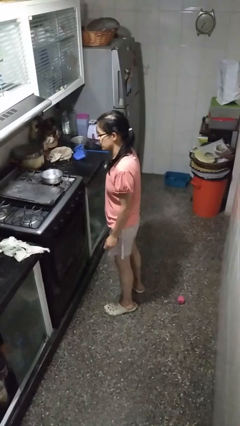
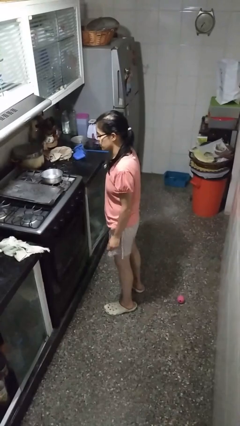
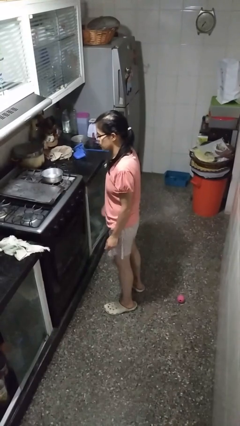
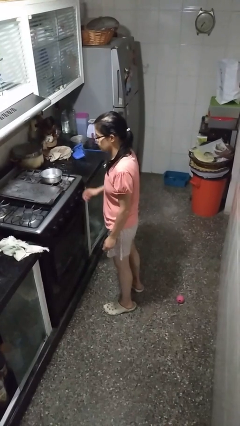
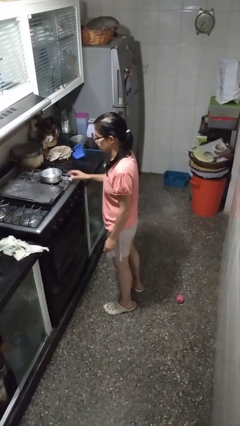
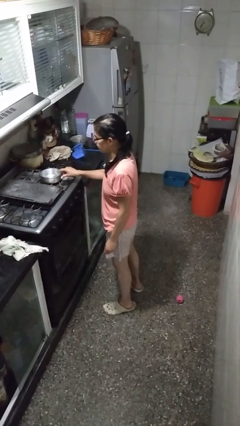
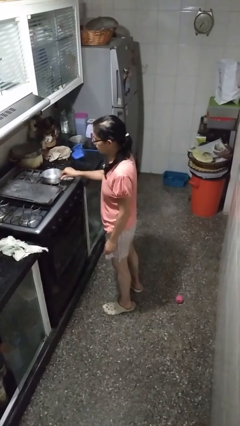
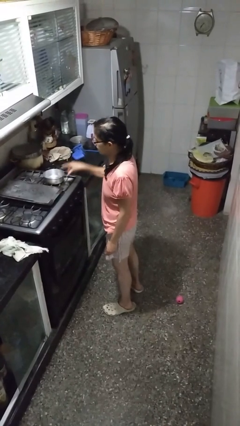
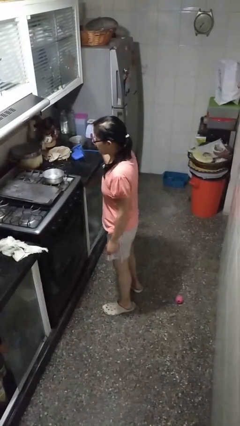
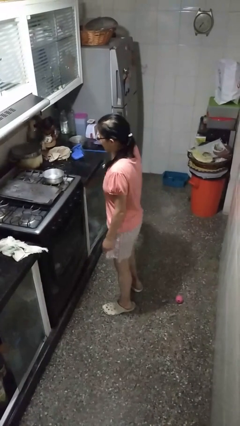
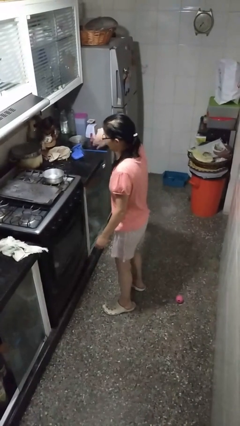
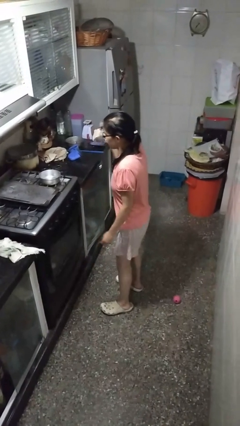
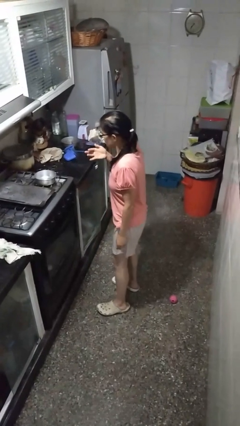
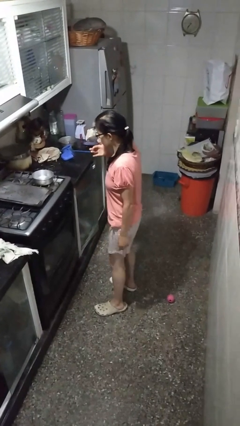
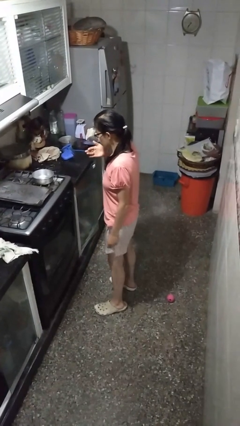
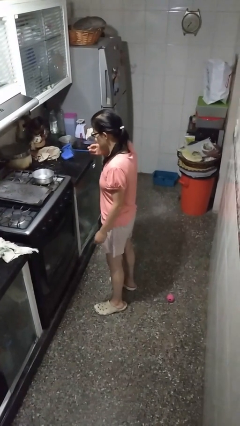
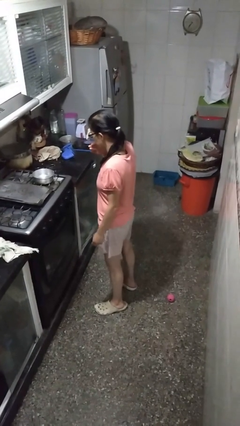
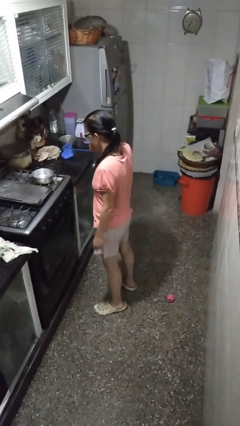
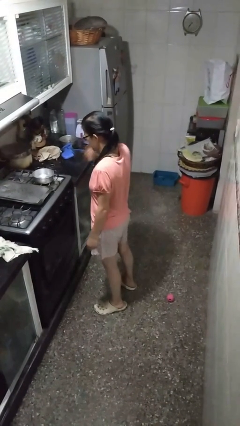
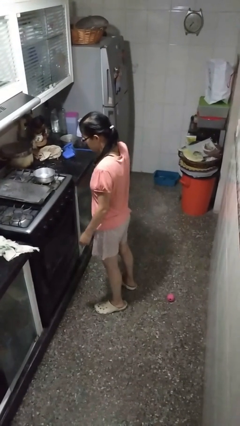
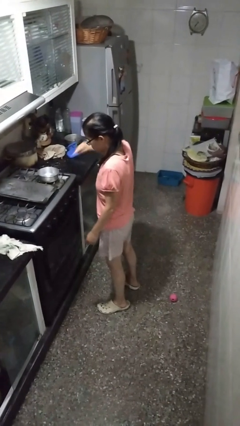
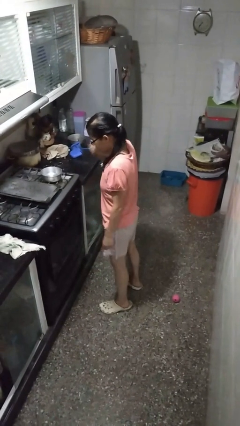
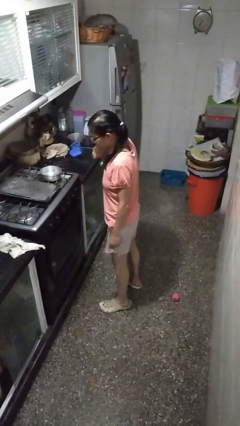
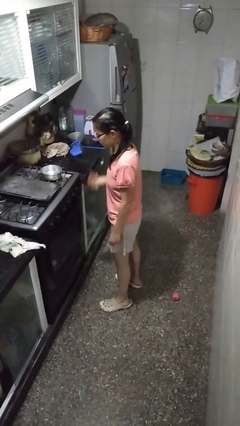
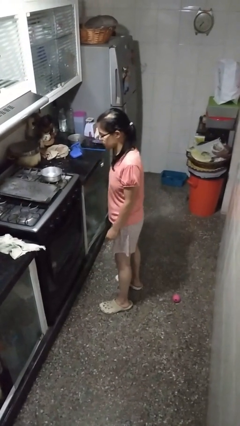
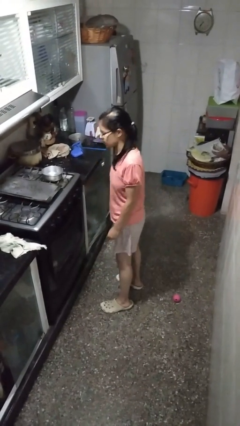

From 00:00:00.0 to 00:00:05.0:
person burns hand

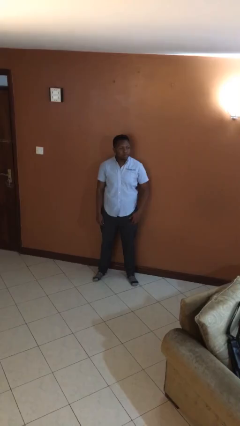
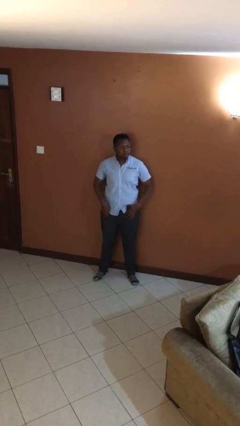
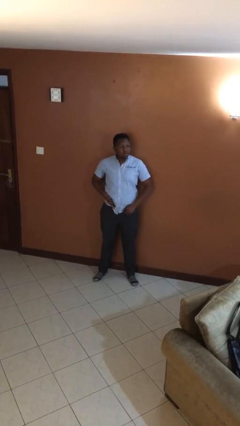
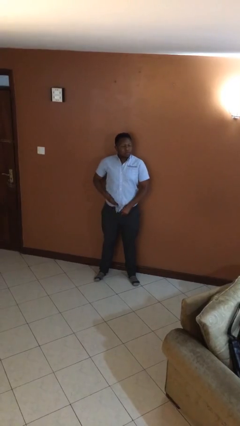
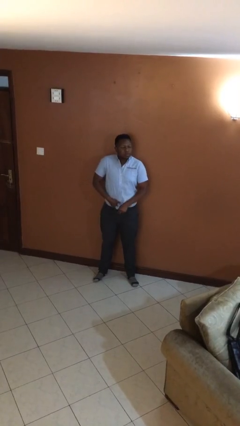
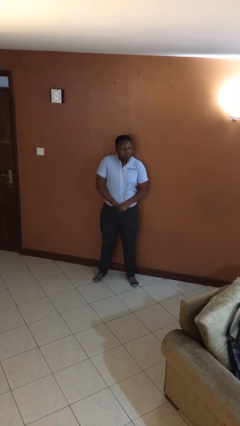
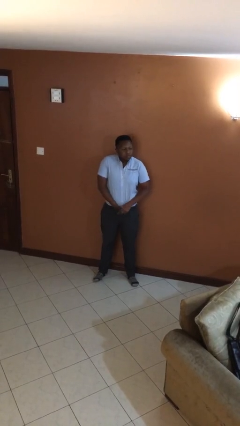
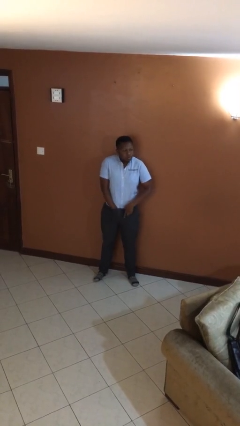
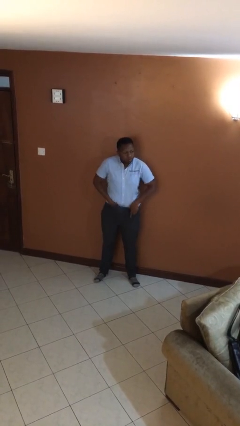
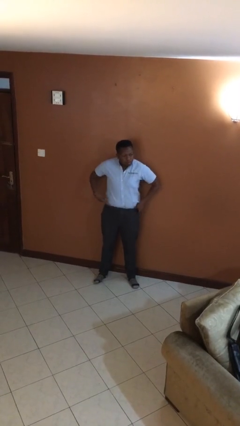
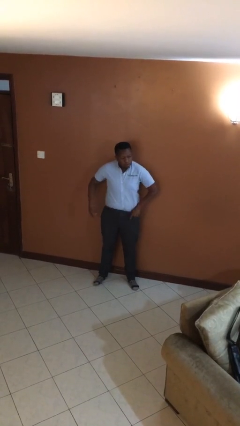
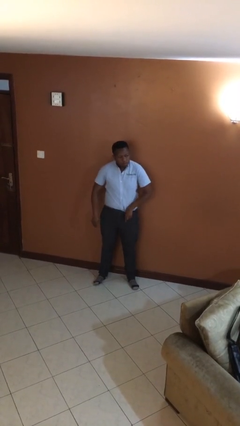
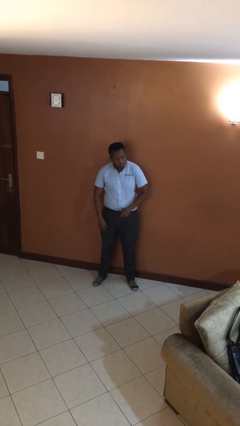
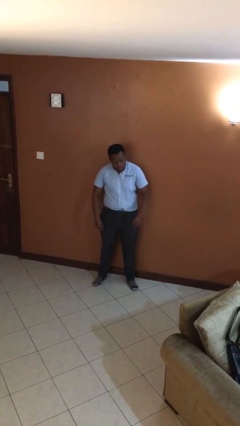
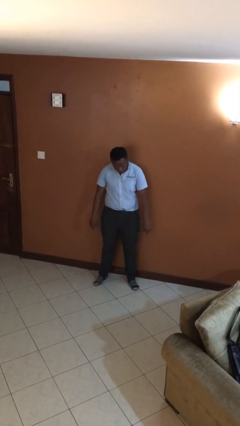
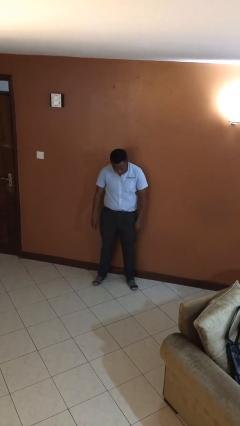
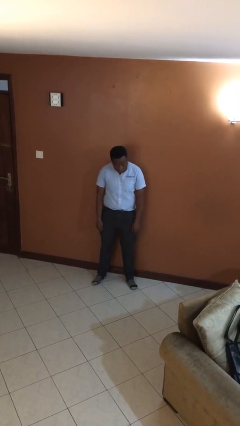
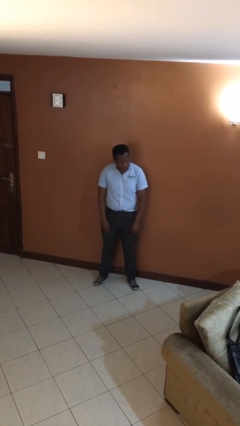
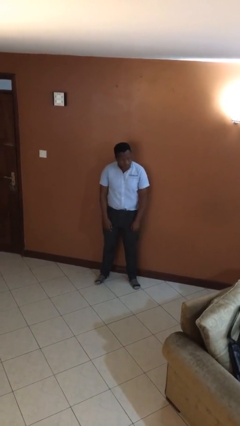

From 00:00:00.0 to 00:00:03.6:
person tucks in shirt

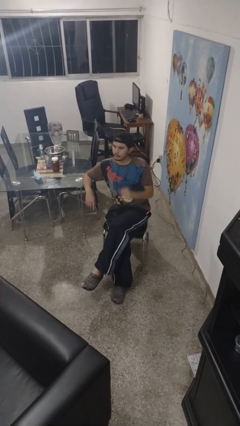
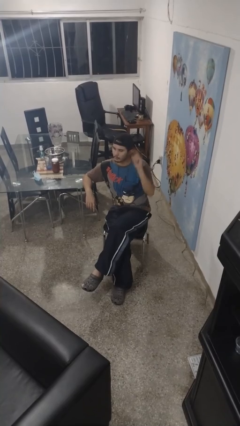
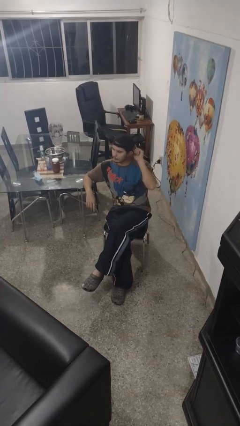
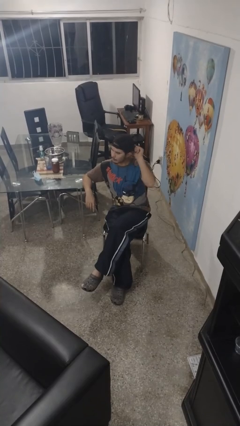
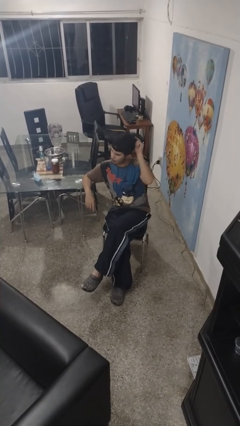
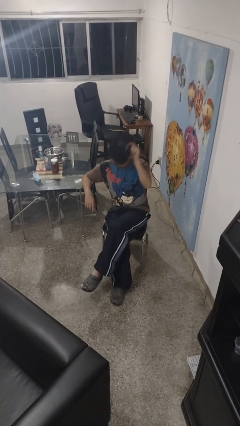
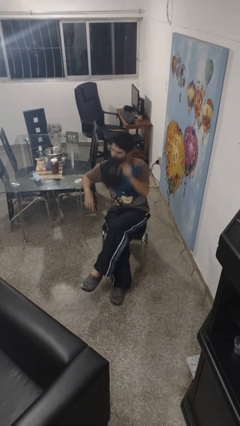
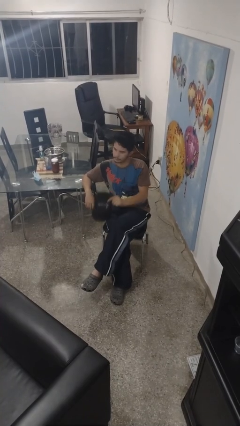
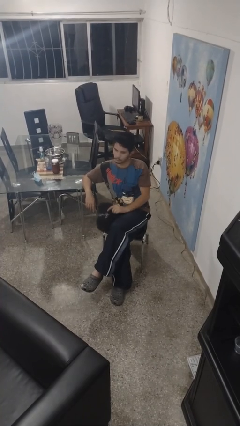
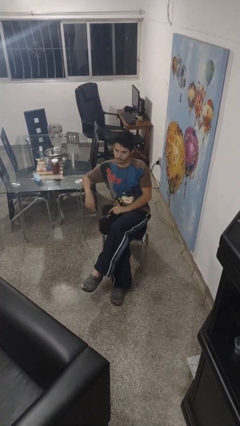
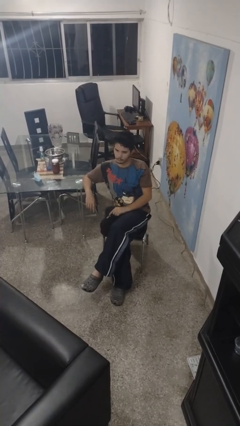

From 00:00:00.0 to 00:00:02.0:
person takes off hat

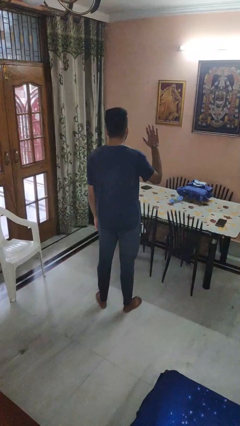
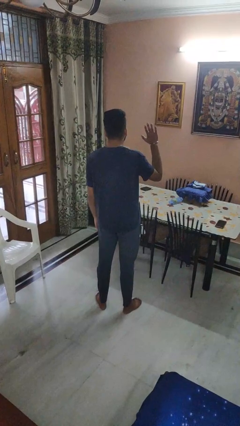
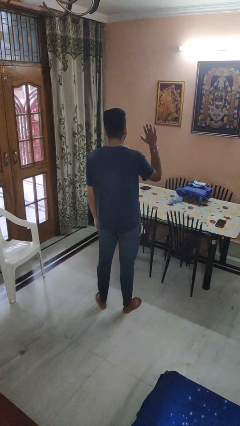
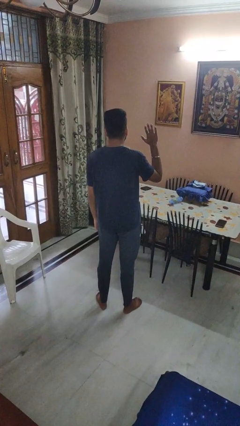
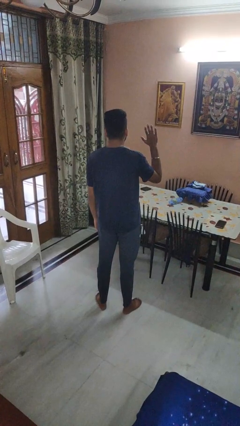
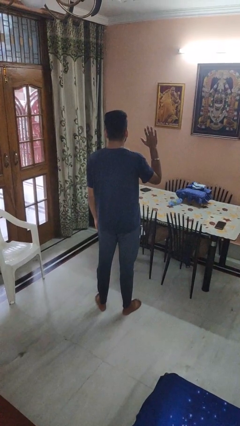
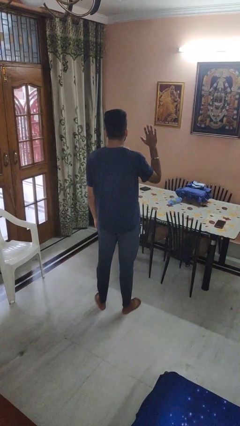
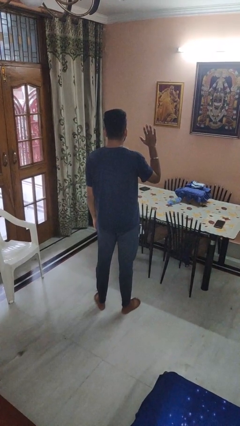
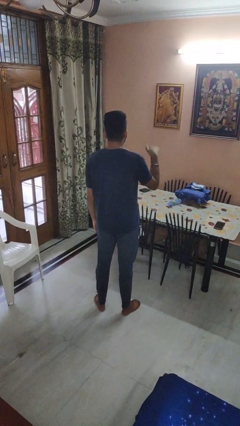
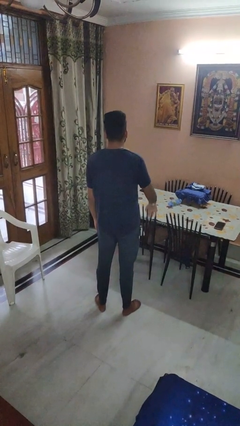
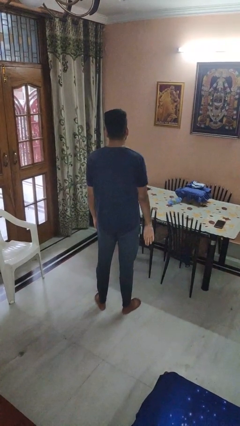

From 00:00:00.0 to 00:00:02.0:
person gestures number five

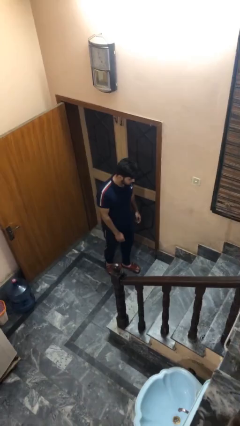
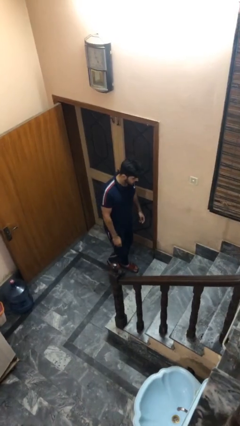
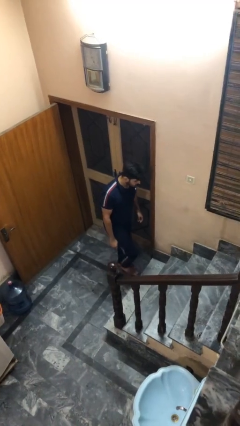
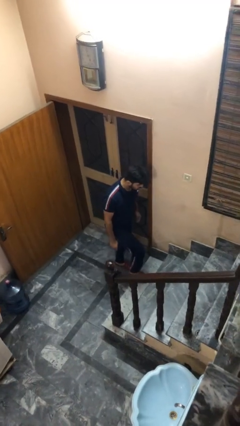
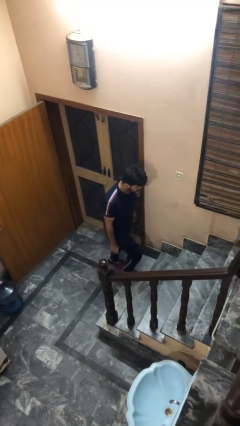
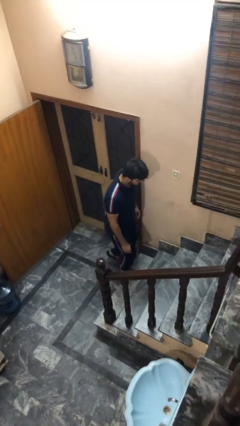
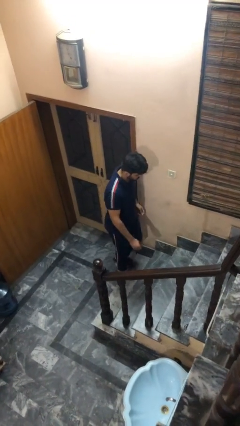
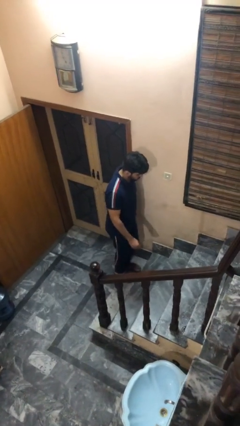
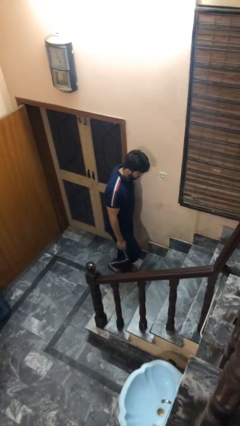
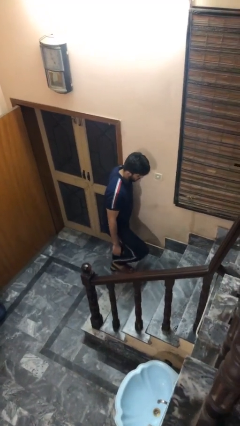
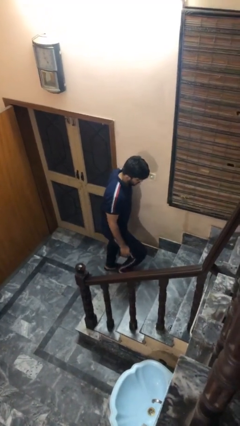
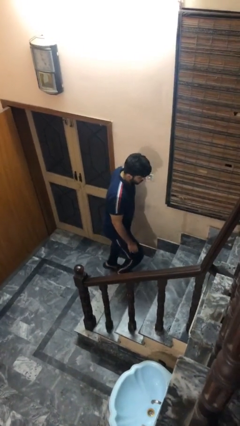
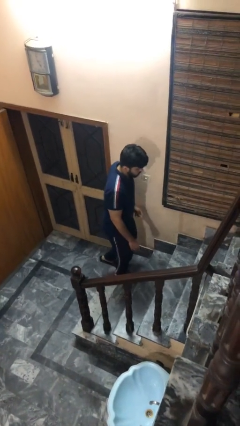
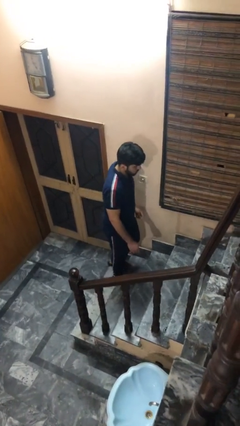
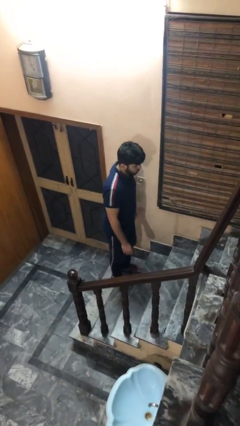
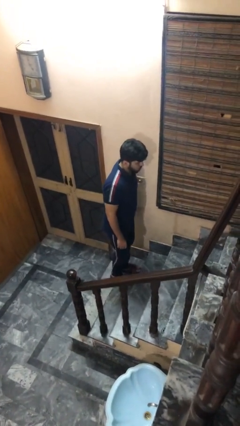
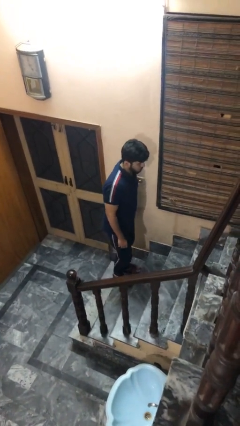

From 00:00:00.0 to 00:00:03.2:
person climbs up stairs

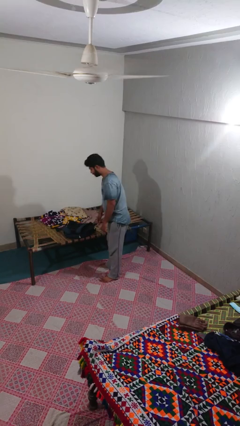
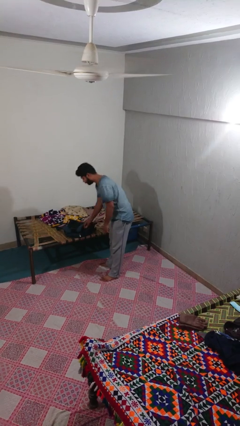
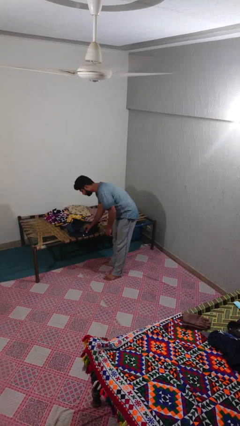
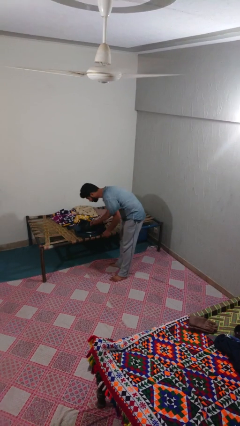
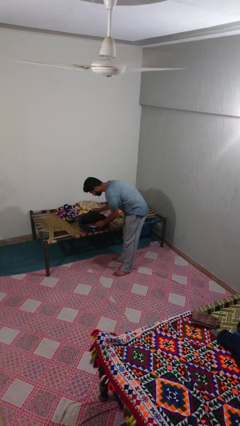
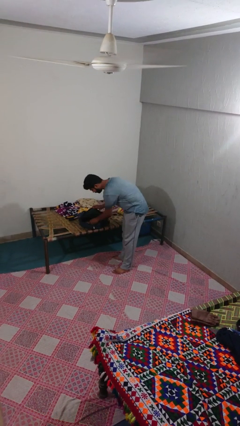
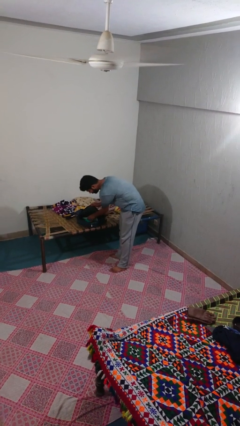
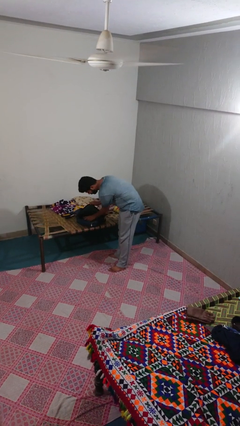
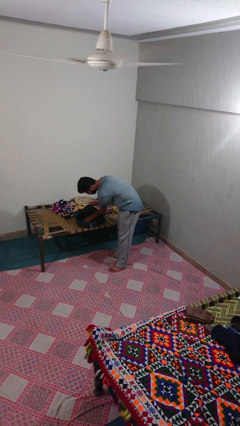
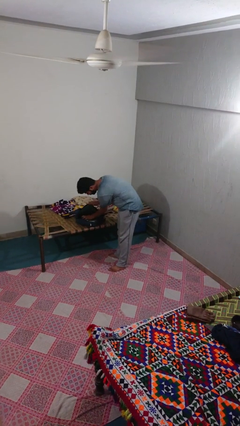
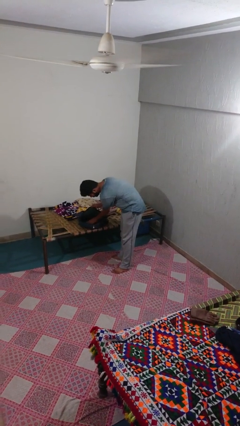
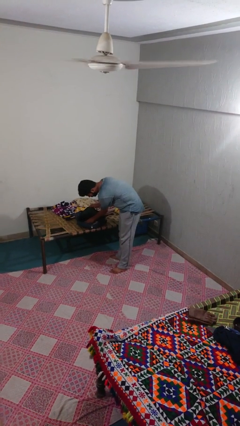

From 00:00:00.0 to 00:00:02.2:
person searches in backpack
